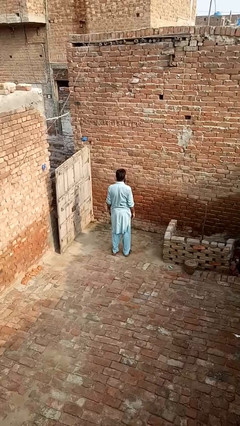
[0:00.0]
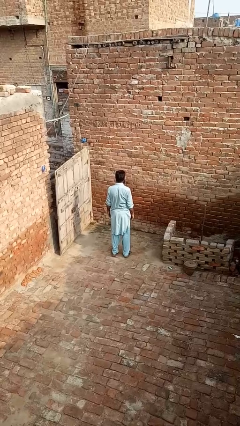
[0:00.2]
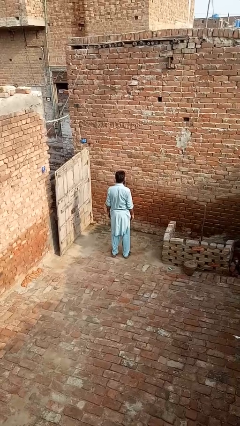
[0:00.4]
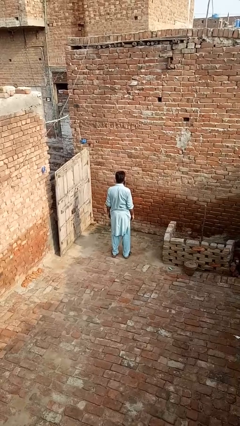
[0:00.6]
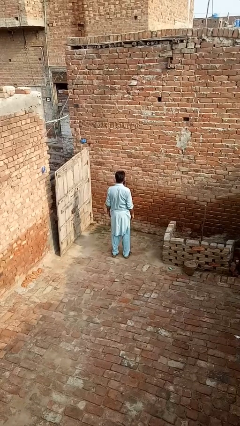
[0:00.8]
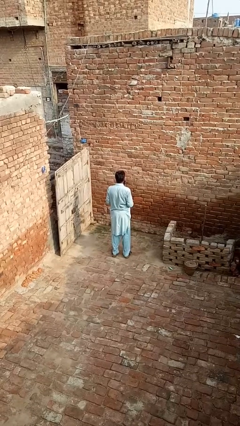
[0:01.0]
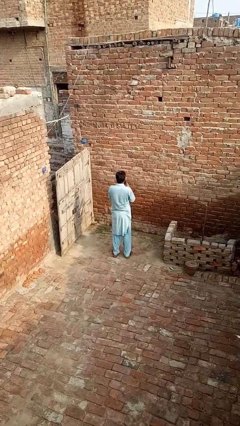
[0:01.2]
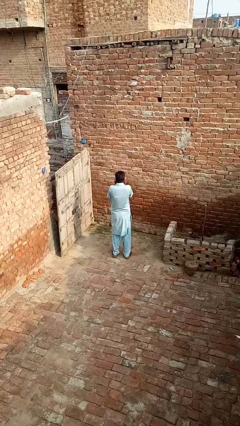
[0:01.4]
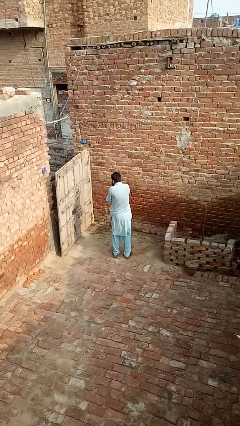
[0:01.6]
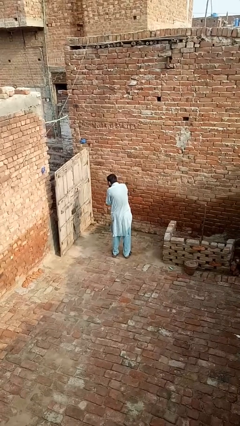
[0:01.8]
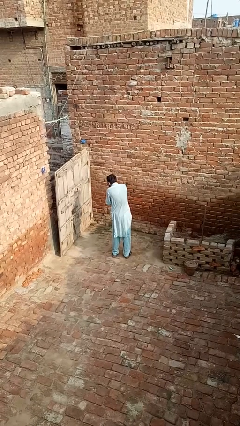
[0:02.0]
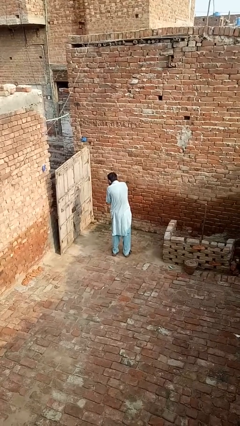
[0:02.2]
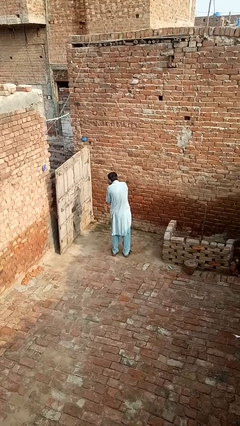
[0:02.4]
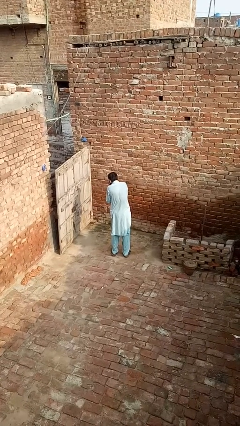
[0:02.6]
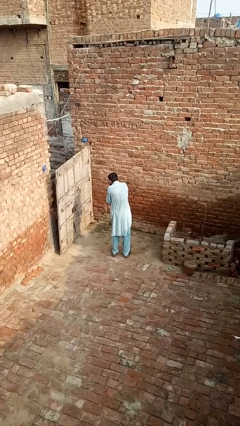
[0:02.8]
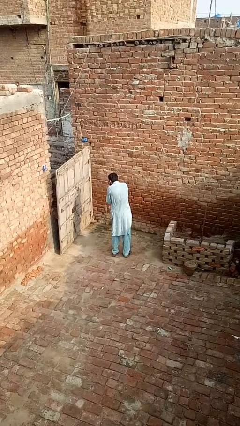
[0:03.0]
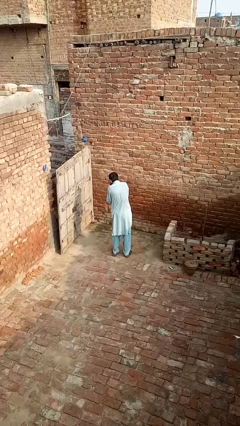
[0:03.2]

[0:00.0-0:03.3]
person sneezes into hand

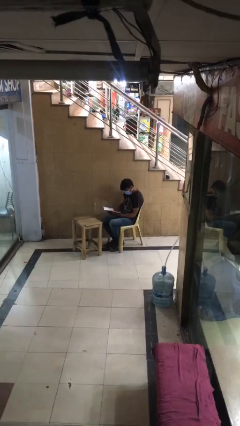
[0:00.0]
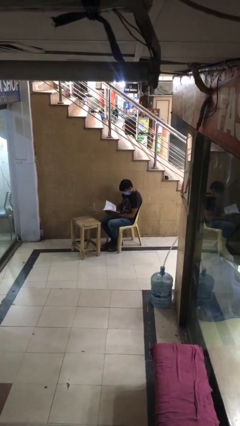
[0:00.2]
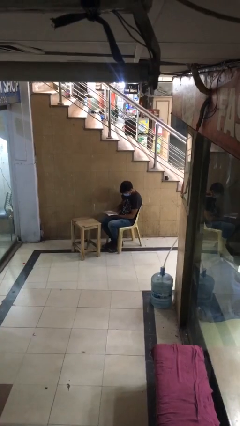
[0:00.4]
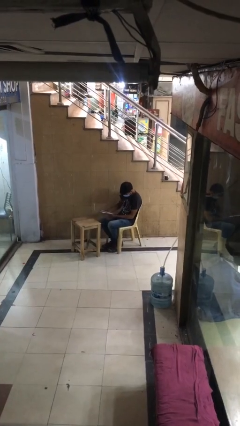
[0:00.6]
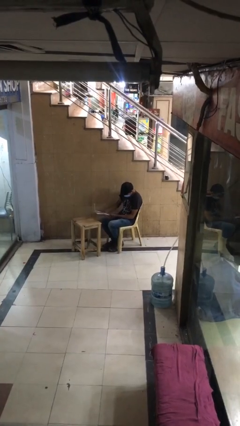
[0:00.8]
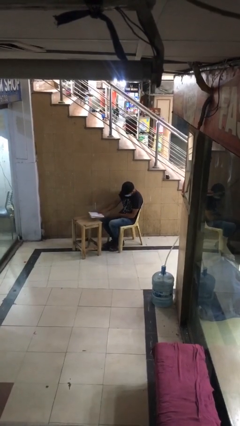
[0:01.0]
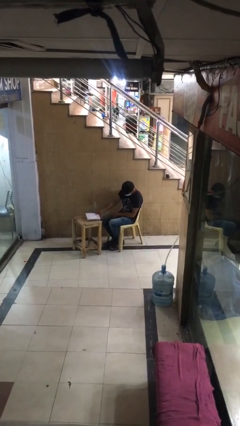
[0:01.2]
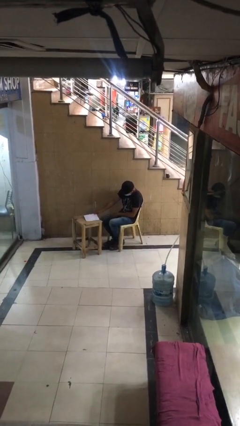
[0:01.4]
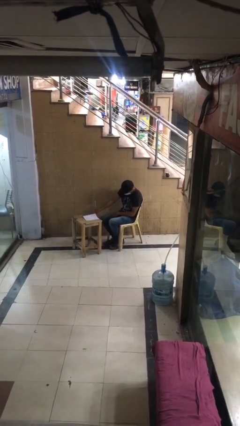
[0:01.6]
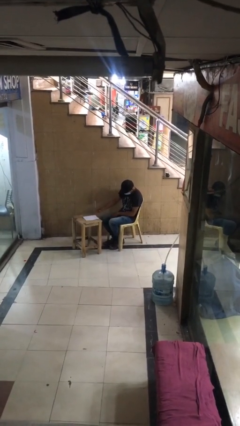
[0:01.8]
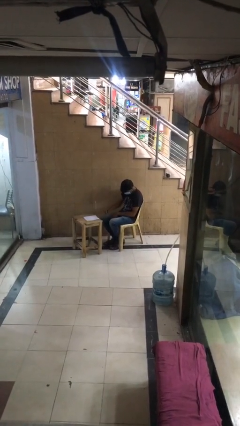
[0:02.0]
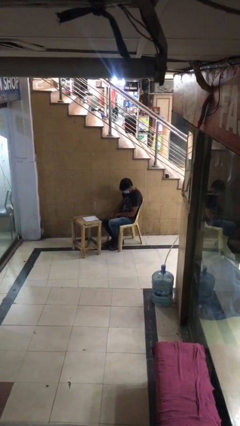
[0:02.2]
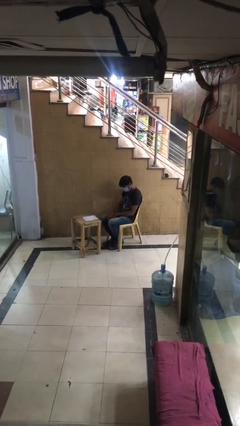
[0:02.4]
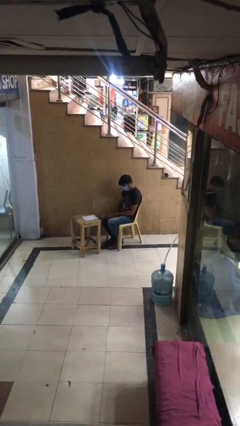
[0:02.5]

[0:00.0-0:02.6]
person puts down object on table

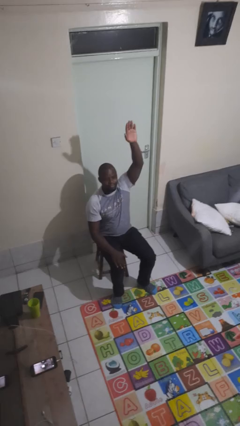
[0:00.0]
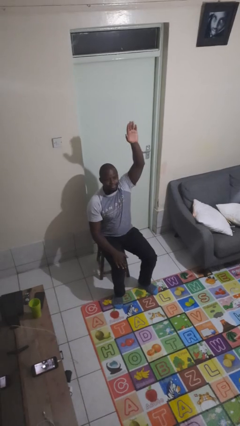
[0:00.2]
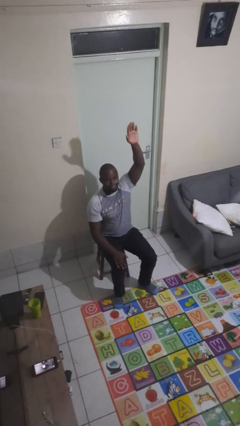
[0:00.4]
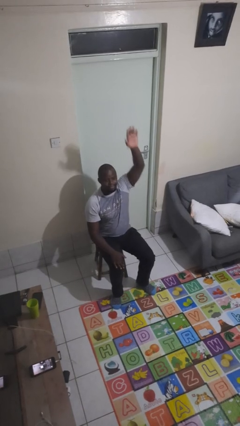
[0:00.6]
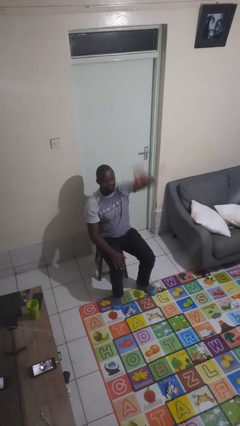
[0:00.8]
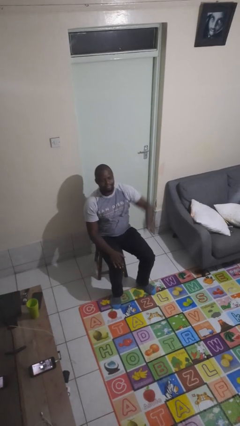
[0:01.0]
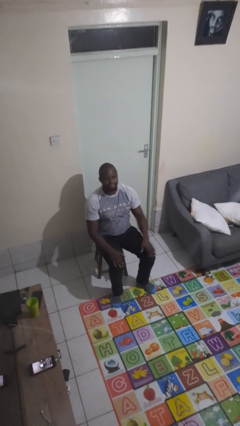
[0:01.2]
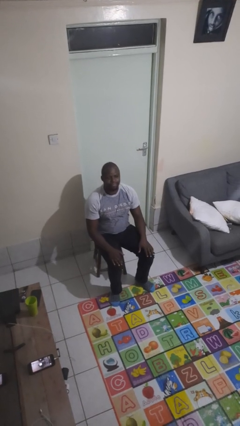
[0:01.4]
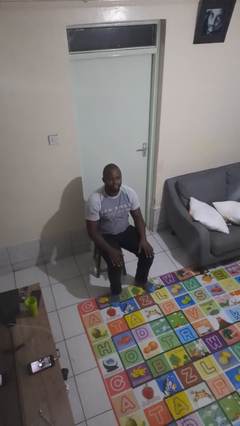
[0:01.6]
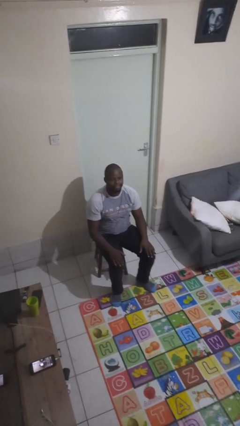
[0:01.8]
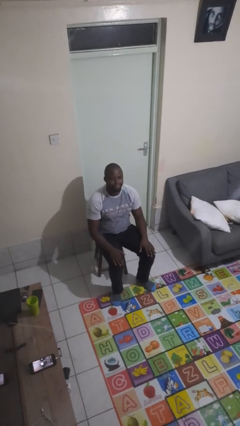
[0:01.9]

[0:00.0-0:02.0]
person gestures lower hand

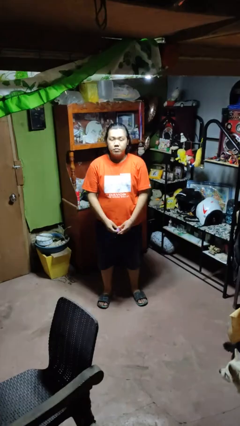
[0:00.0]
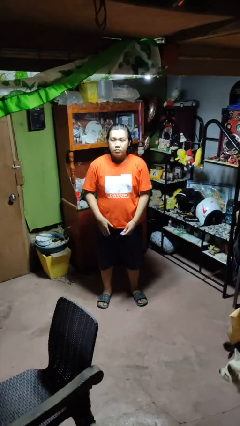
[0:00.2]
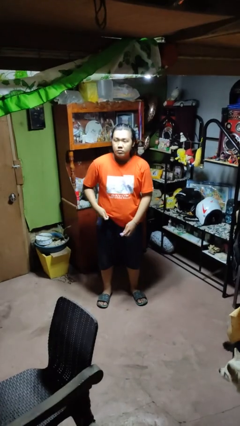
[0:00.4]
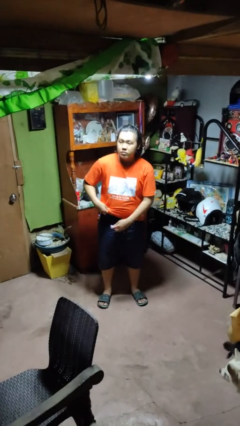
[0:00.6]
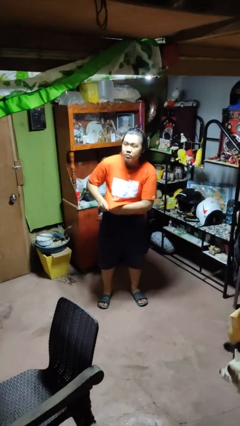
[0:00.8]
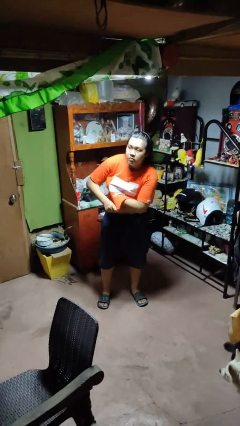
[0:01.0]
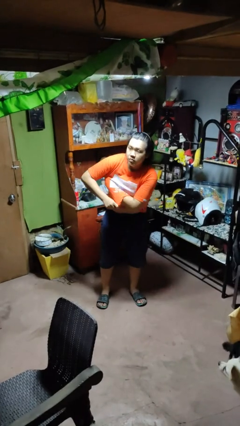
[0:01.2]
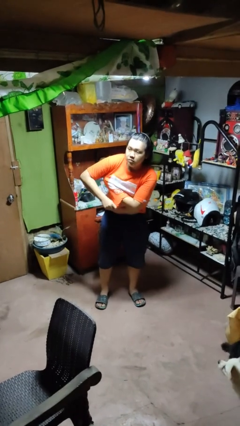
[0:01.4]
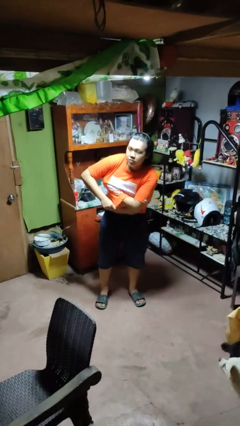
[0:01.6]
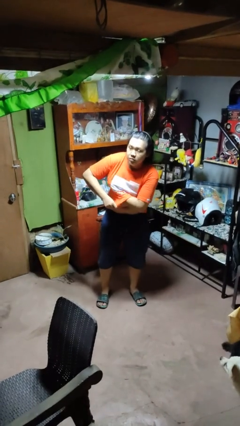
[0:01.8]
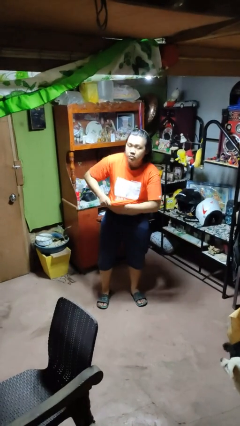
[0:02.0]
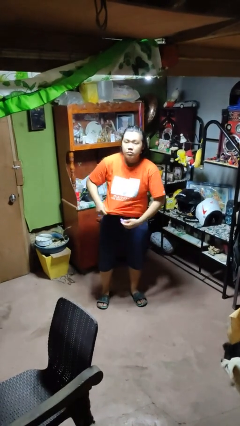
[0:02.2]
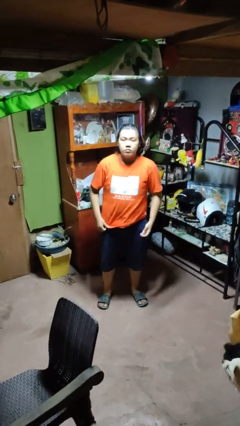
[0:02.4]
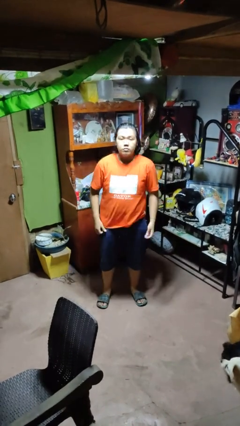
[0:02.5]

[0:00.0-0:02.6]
person applies deodorant

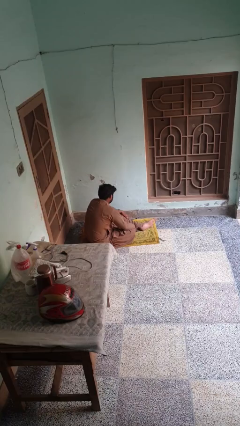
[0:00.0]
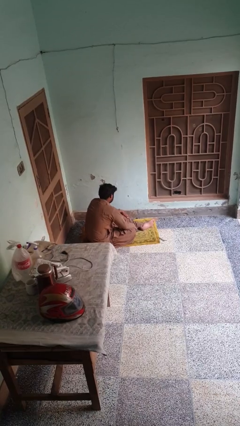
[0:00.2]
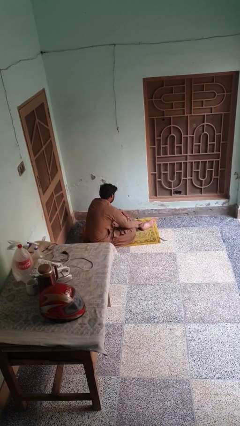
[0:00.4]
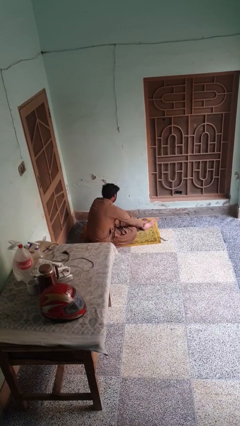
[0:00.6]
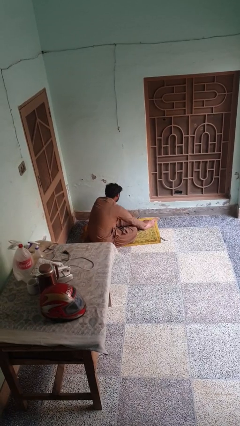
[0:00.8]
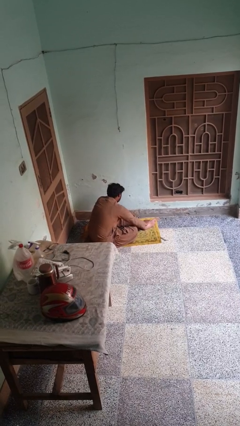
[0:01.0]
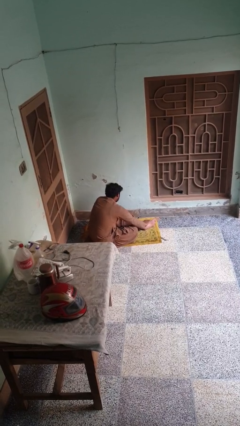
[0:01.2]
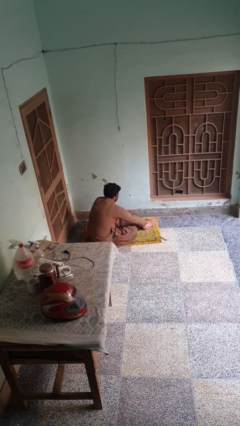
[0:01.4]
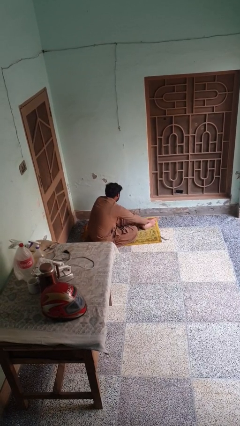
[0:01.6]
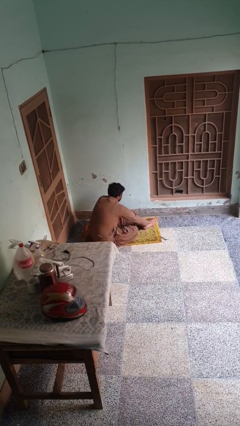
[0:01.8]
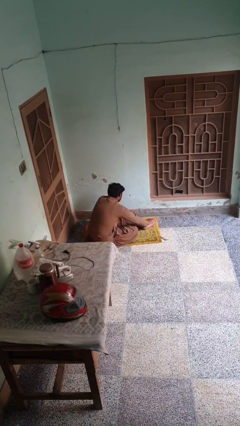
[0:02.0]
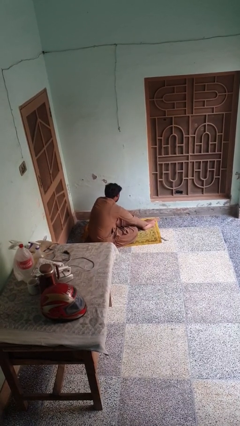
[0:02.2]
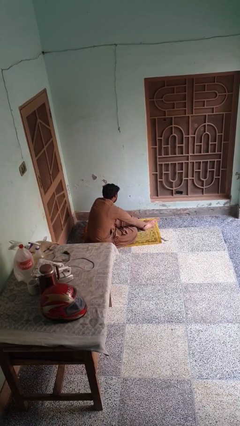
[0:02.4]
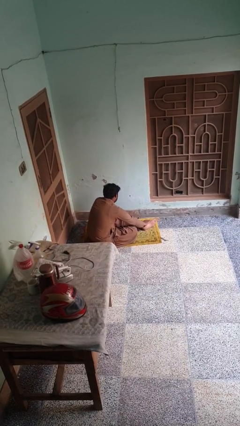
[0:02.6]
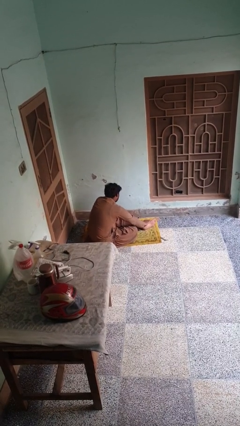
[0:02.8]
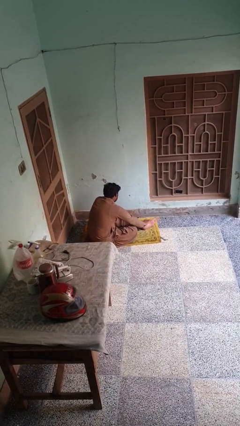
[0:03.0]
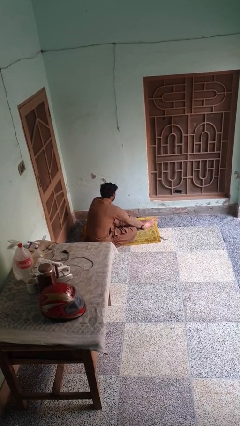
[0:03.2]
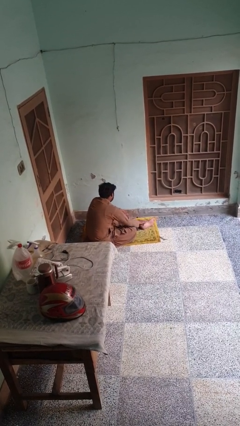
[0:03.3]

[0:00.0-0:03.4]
person rubs foot

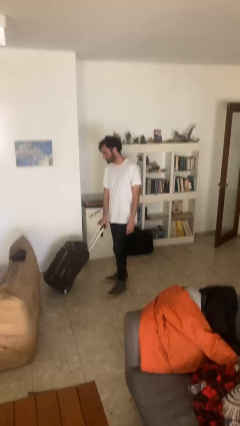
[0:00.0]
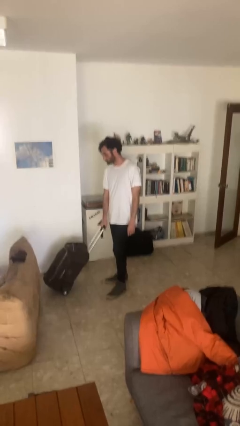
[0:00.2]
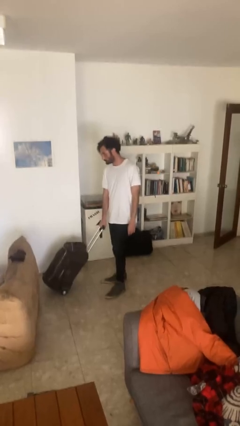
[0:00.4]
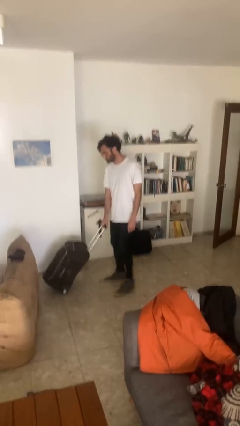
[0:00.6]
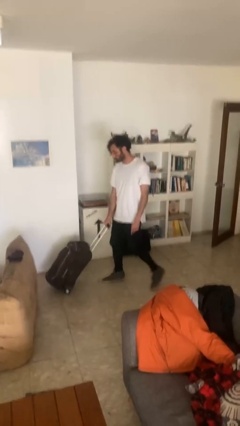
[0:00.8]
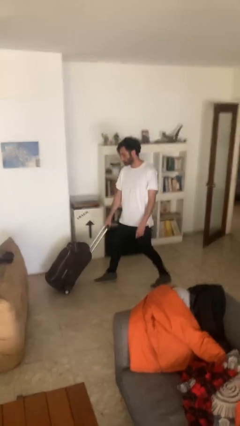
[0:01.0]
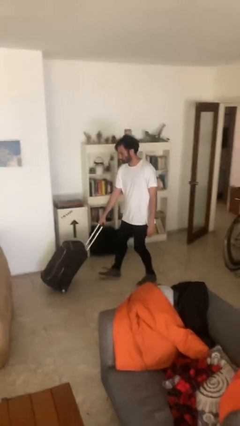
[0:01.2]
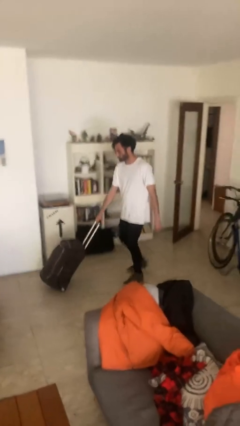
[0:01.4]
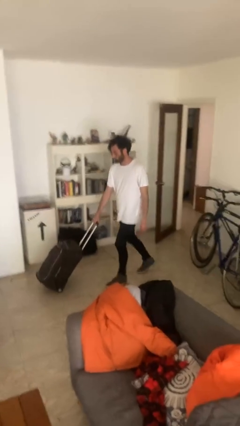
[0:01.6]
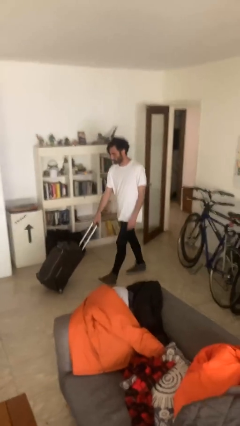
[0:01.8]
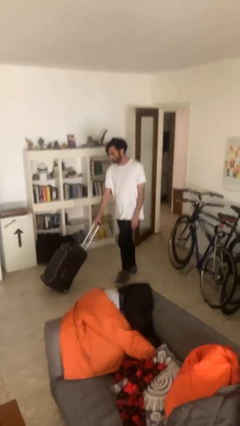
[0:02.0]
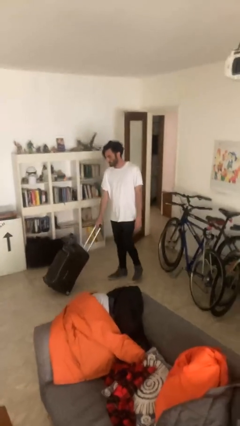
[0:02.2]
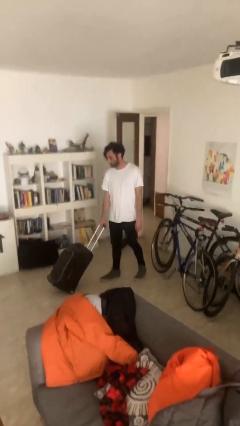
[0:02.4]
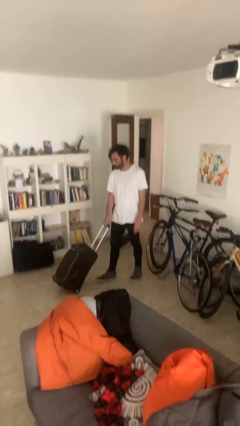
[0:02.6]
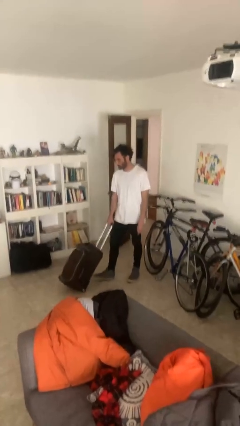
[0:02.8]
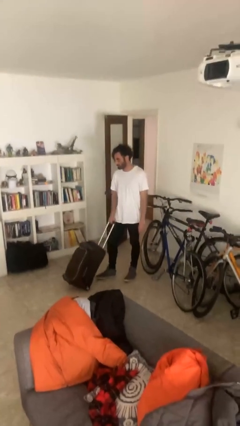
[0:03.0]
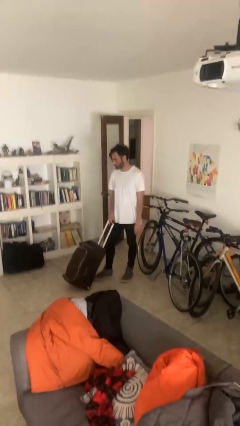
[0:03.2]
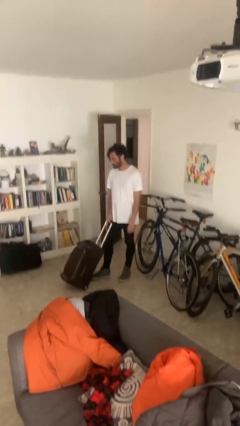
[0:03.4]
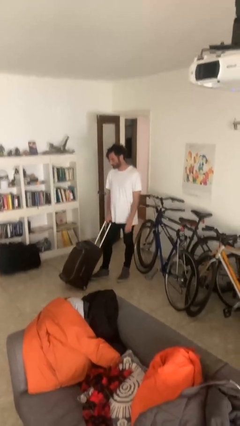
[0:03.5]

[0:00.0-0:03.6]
person pulls wheeled cart
